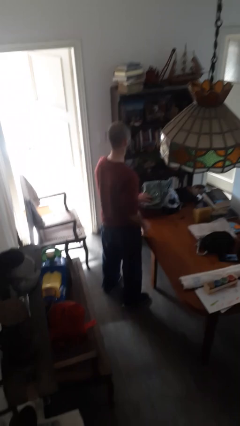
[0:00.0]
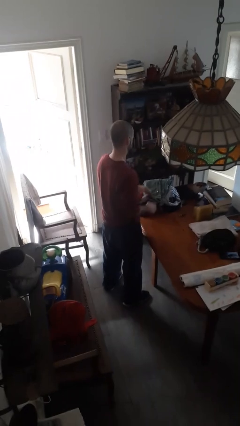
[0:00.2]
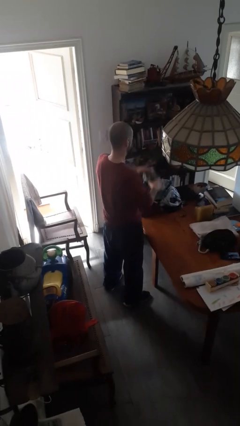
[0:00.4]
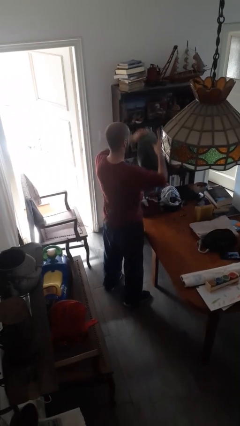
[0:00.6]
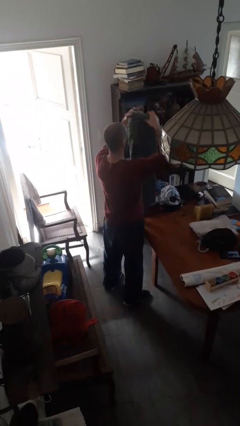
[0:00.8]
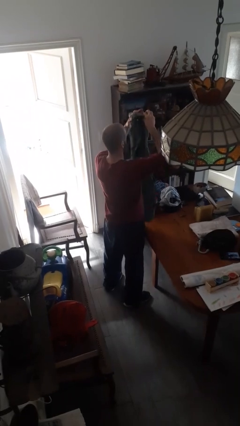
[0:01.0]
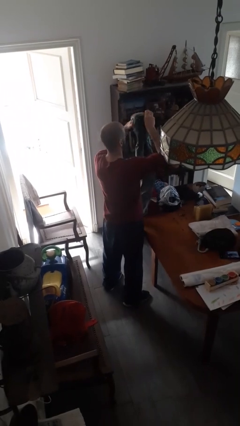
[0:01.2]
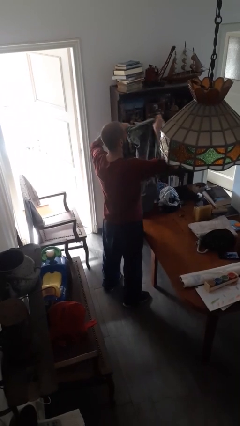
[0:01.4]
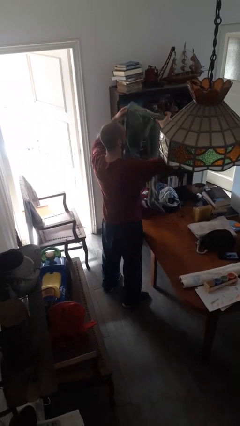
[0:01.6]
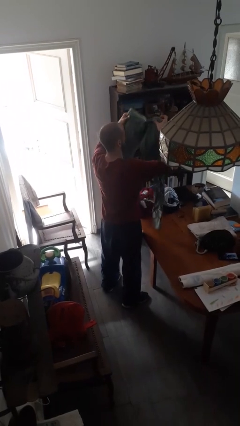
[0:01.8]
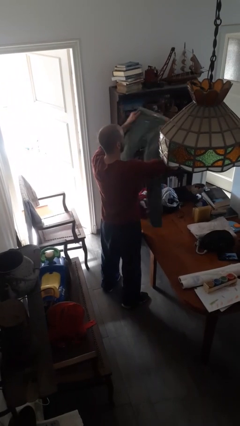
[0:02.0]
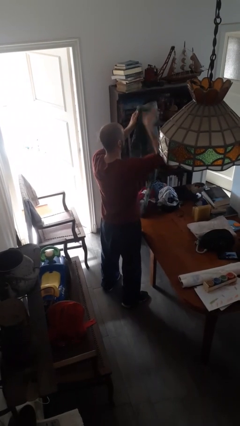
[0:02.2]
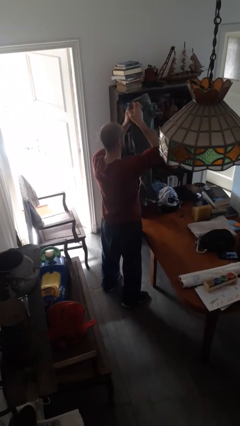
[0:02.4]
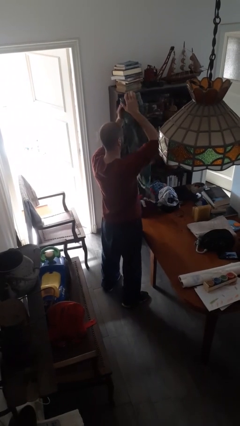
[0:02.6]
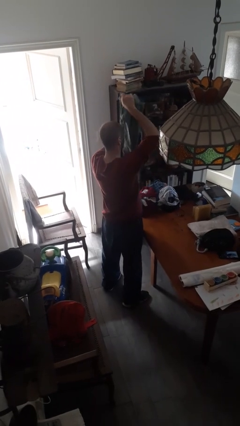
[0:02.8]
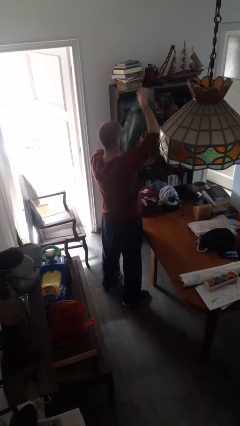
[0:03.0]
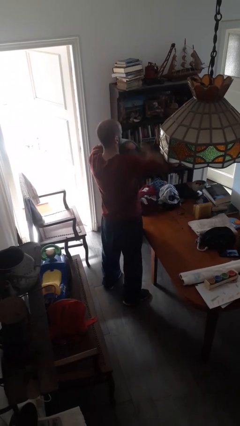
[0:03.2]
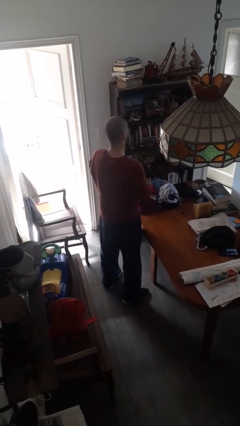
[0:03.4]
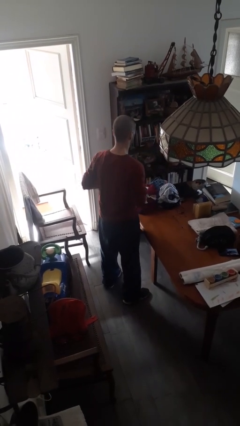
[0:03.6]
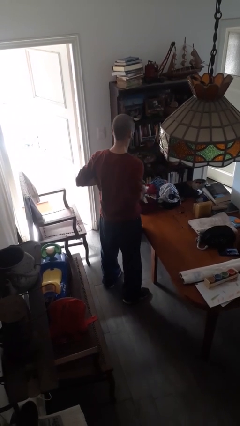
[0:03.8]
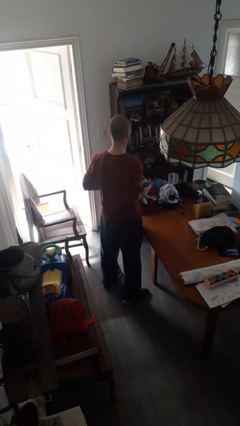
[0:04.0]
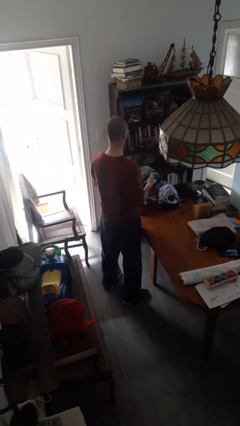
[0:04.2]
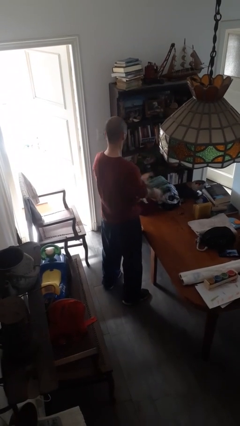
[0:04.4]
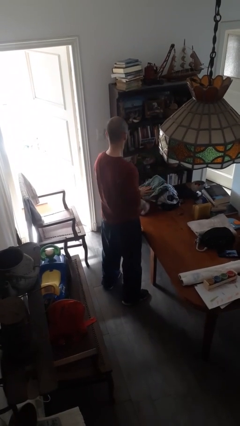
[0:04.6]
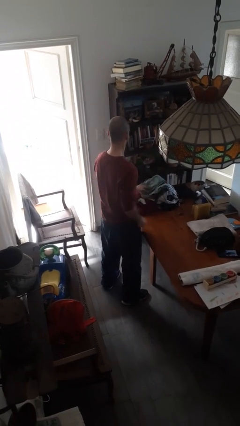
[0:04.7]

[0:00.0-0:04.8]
person folds pants

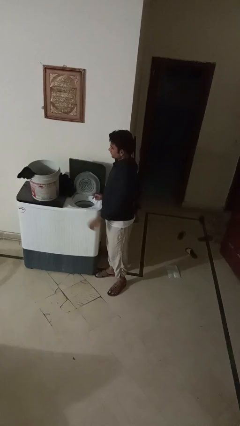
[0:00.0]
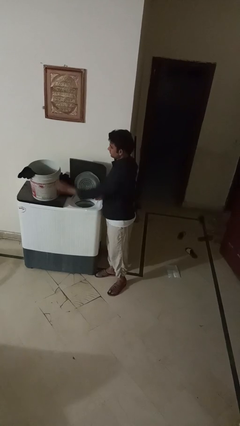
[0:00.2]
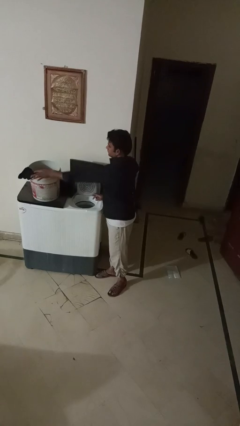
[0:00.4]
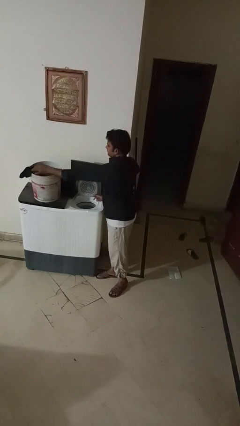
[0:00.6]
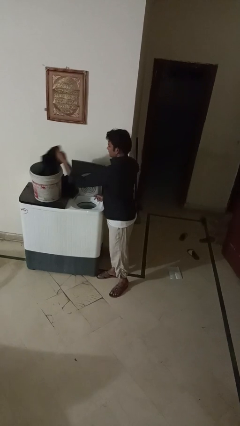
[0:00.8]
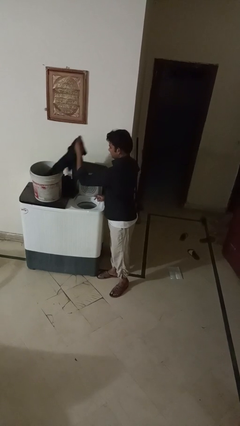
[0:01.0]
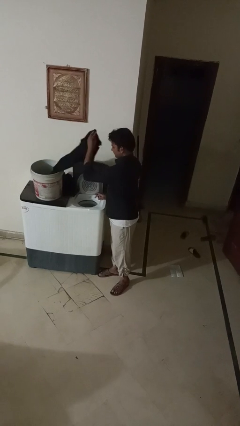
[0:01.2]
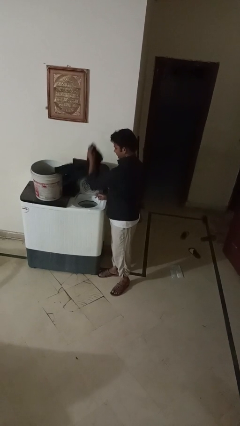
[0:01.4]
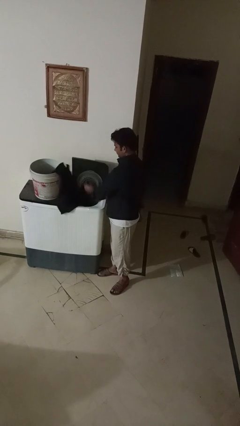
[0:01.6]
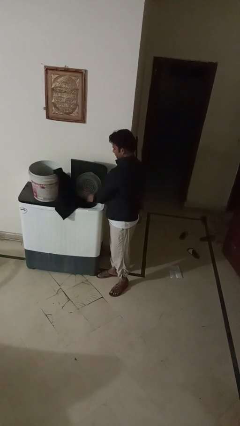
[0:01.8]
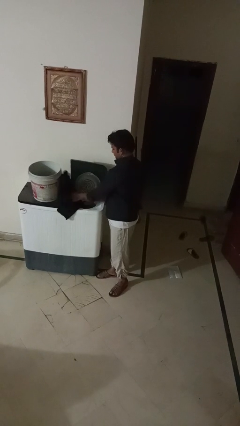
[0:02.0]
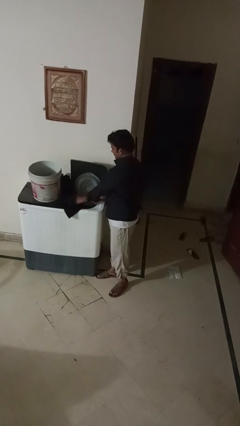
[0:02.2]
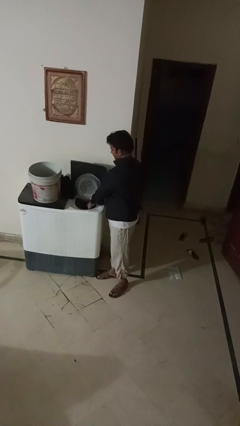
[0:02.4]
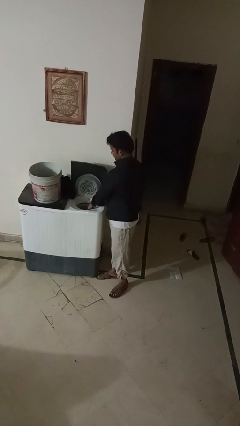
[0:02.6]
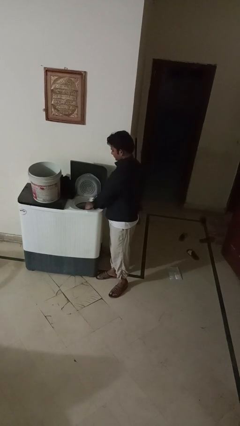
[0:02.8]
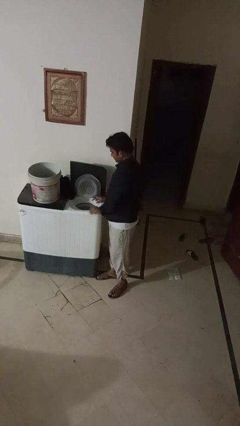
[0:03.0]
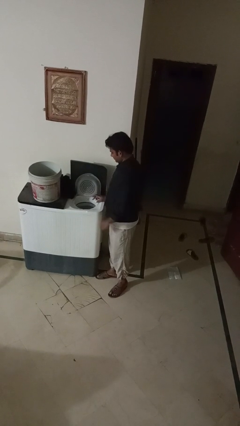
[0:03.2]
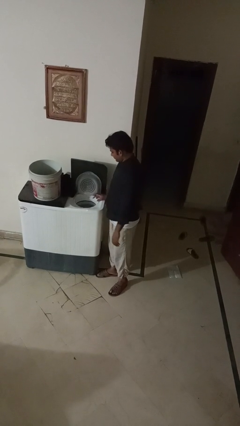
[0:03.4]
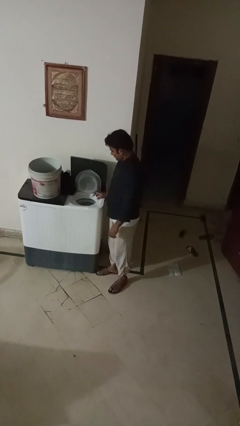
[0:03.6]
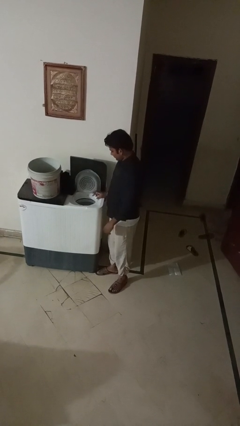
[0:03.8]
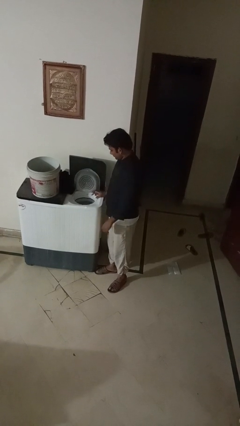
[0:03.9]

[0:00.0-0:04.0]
person loads dryer

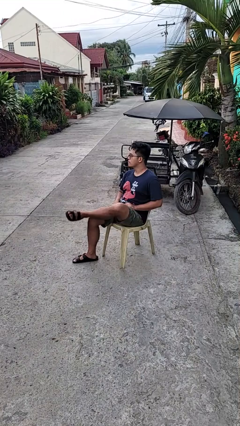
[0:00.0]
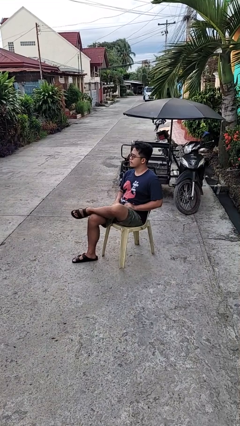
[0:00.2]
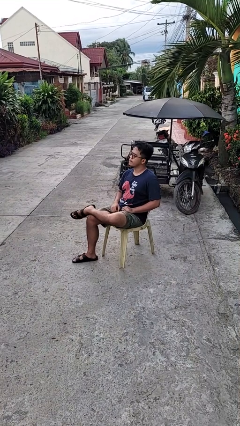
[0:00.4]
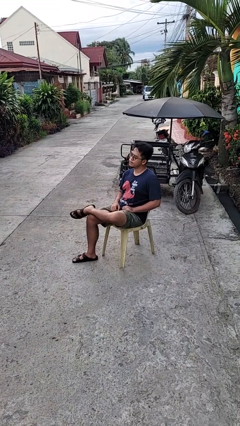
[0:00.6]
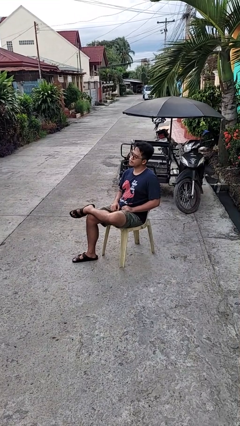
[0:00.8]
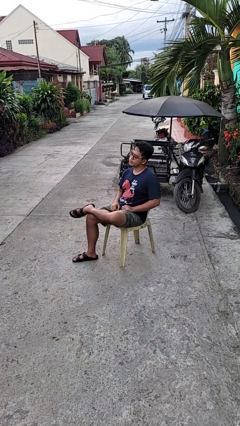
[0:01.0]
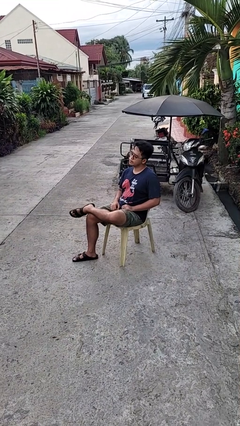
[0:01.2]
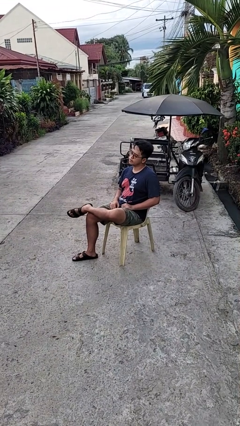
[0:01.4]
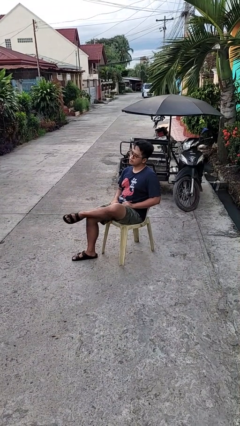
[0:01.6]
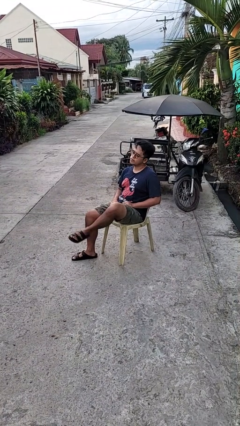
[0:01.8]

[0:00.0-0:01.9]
person crosses legs

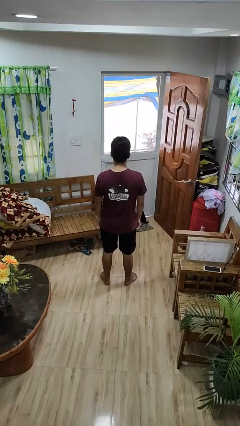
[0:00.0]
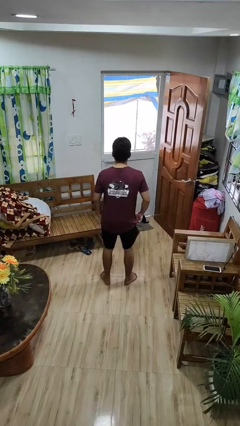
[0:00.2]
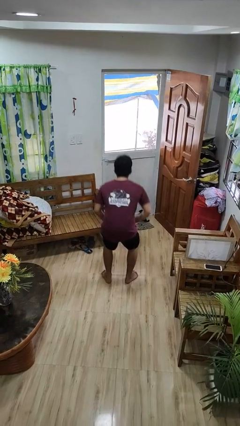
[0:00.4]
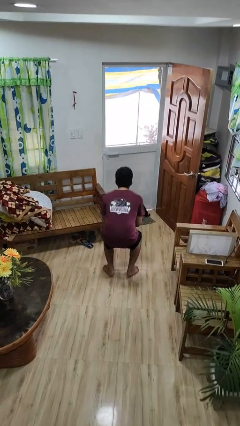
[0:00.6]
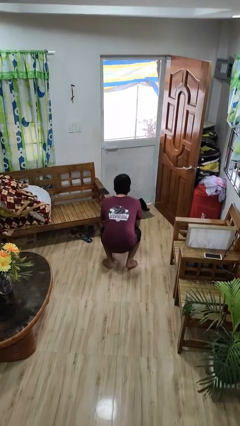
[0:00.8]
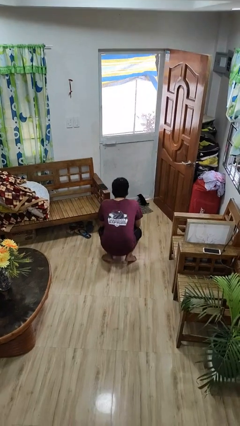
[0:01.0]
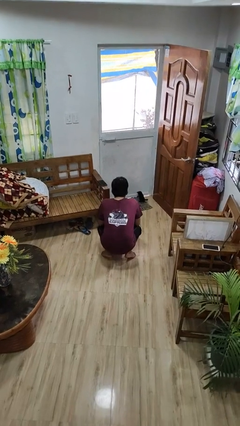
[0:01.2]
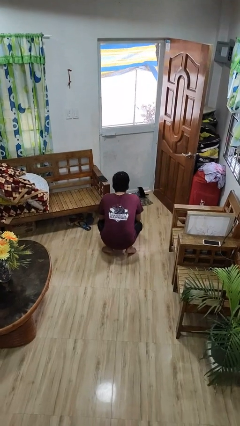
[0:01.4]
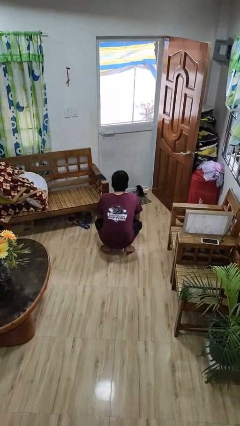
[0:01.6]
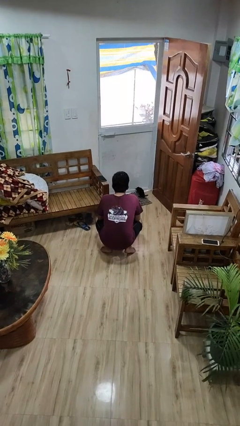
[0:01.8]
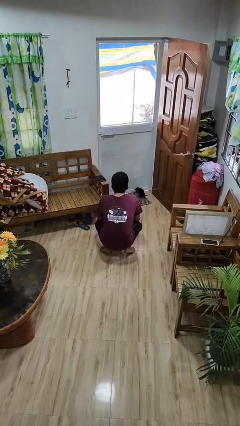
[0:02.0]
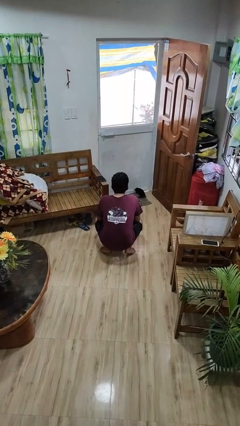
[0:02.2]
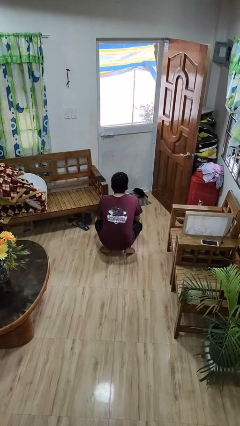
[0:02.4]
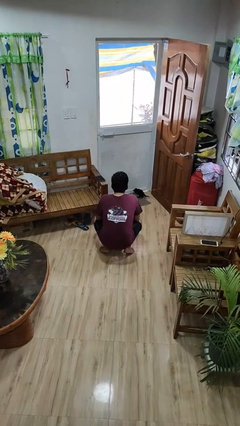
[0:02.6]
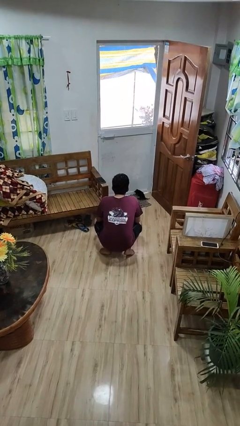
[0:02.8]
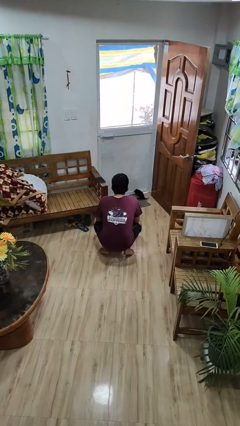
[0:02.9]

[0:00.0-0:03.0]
person squats

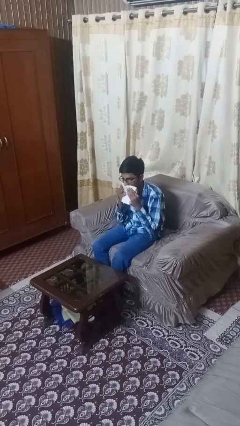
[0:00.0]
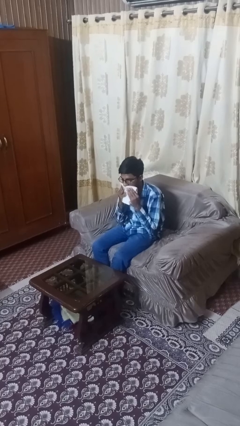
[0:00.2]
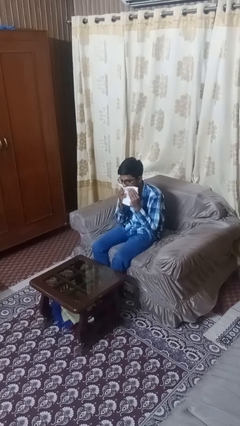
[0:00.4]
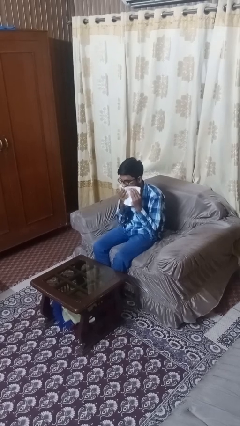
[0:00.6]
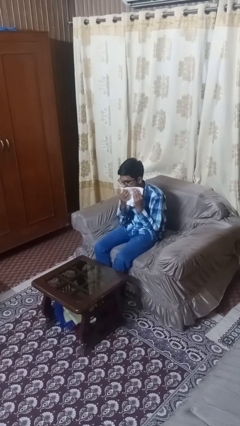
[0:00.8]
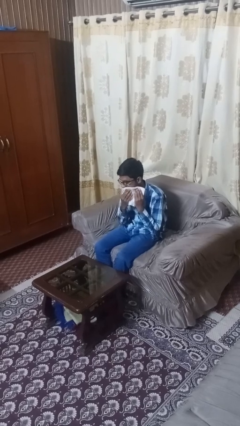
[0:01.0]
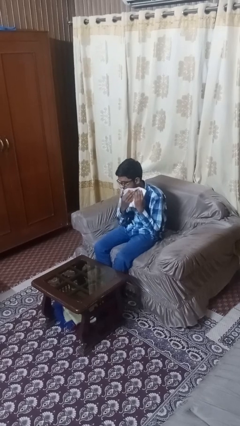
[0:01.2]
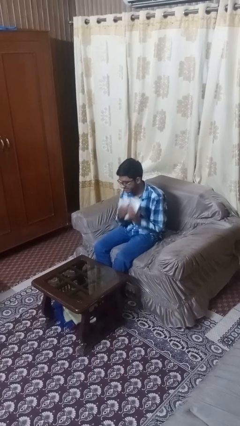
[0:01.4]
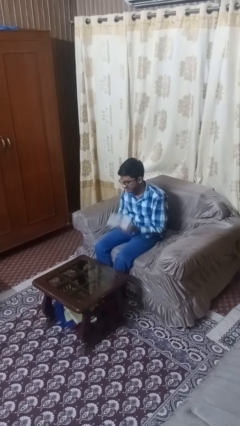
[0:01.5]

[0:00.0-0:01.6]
person wipes mouth with napkin

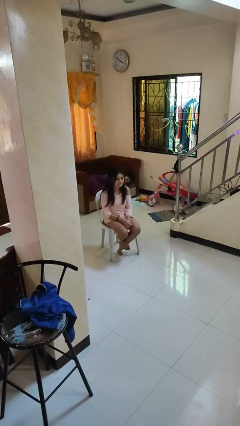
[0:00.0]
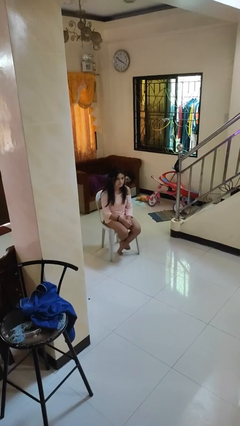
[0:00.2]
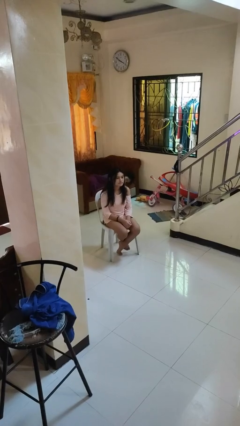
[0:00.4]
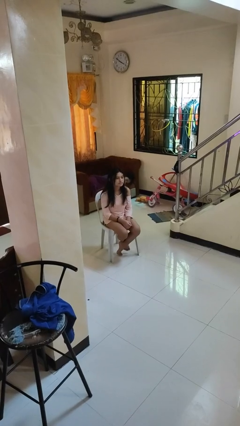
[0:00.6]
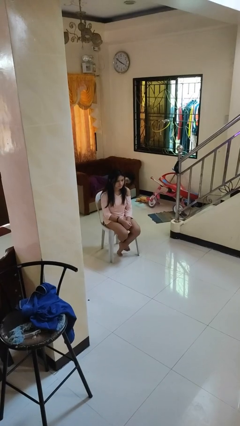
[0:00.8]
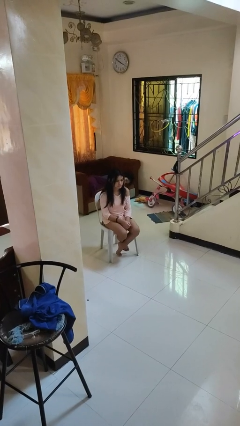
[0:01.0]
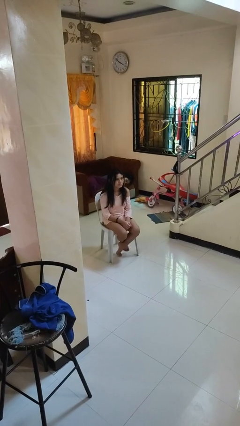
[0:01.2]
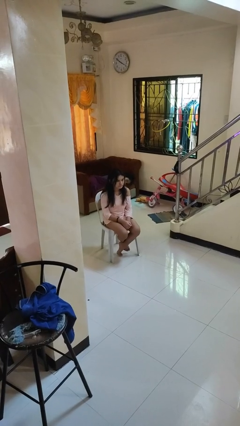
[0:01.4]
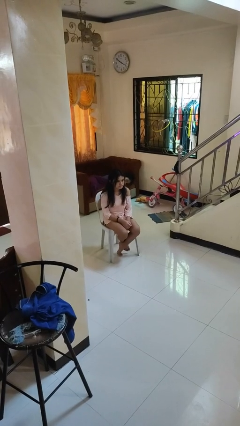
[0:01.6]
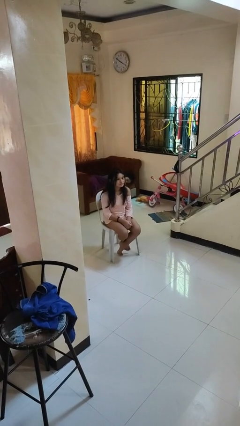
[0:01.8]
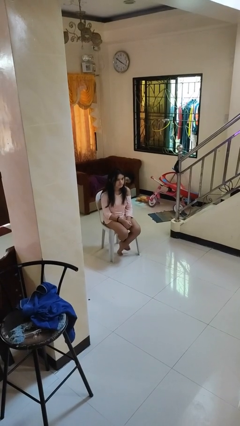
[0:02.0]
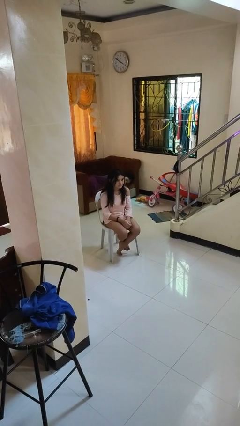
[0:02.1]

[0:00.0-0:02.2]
person nods head

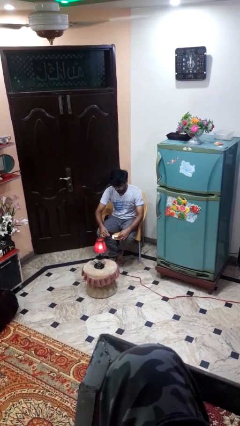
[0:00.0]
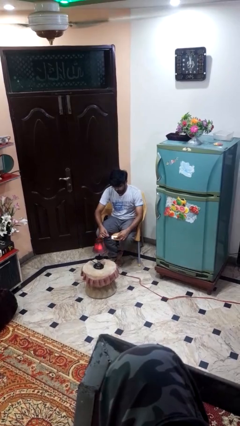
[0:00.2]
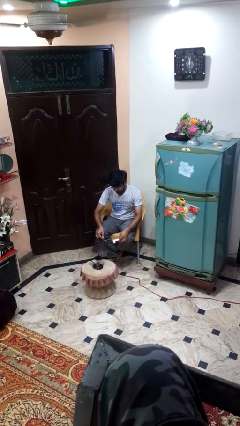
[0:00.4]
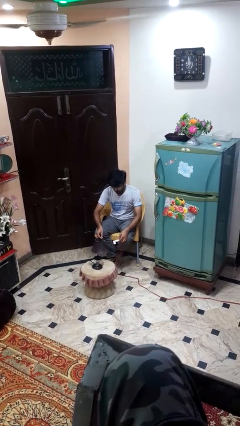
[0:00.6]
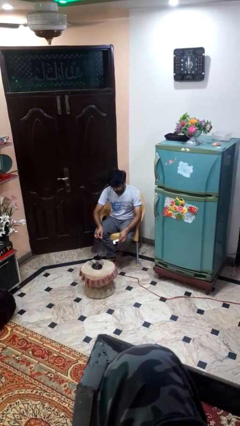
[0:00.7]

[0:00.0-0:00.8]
person turns off lamp
